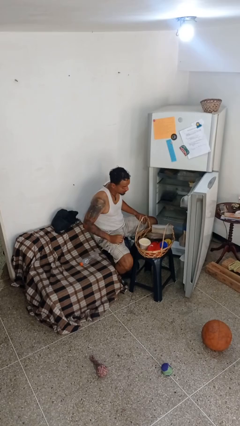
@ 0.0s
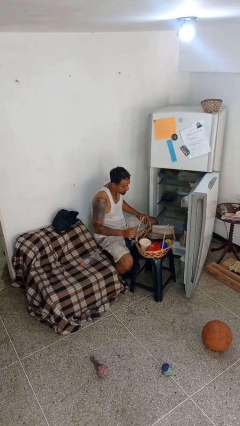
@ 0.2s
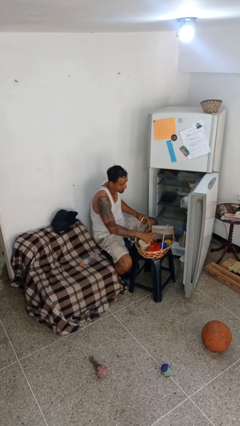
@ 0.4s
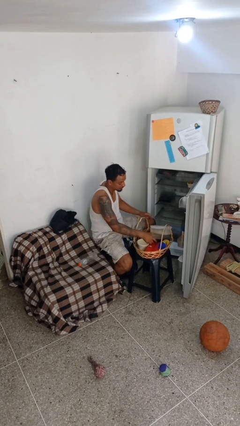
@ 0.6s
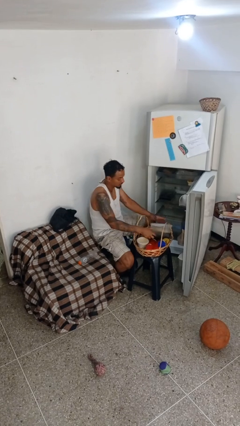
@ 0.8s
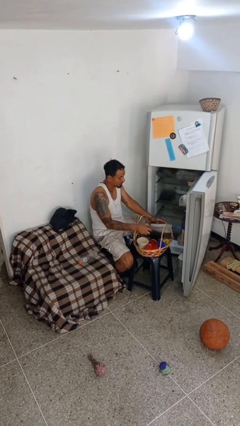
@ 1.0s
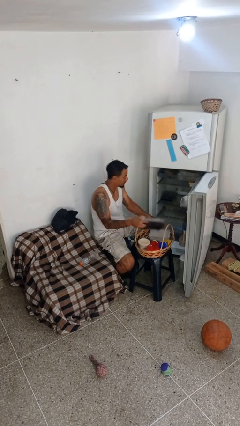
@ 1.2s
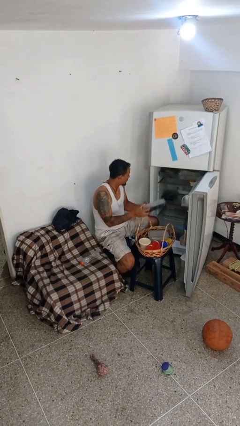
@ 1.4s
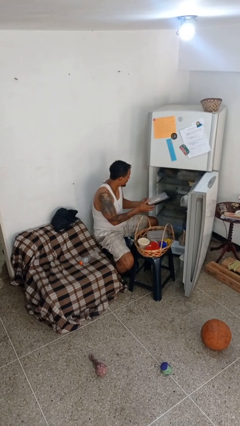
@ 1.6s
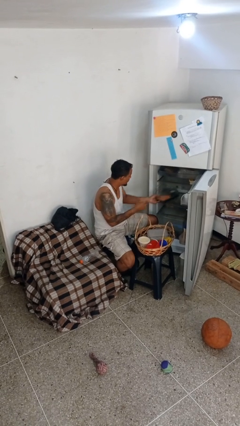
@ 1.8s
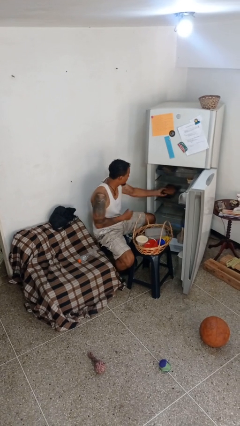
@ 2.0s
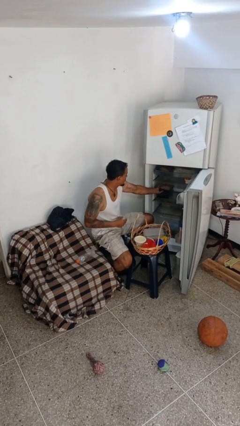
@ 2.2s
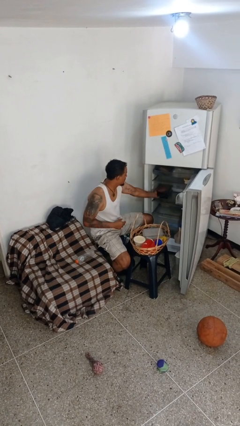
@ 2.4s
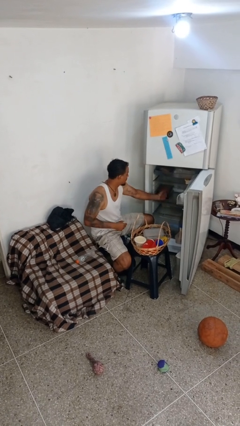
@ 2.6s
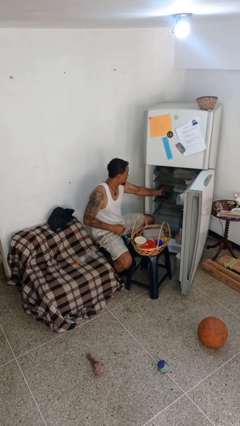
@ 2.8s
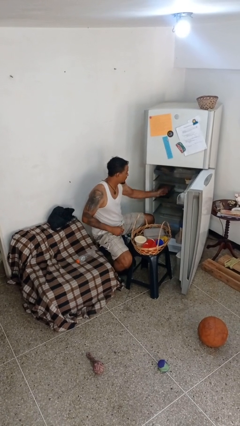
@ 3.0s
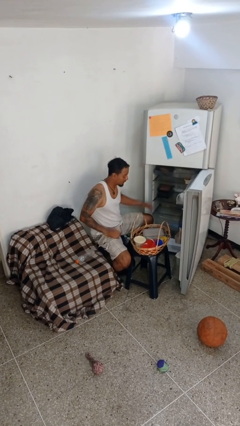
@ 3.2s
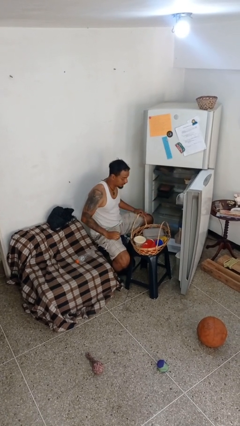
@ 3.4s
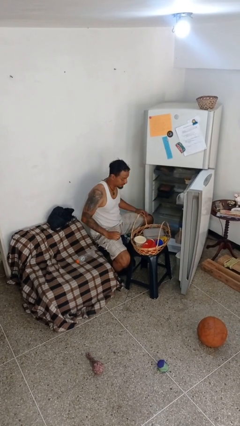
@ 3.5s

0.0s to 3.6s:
person loads groceries into refrigerator

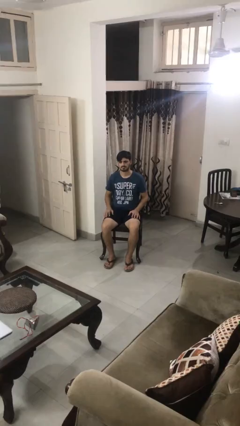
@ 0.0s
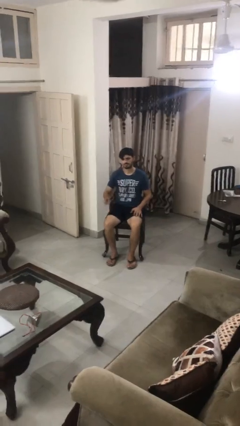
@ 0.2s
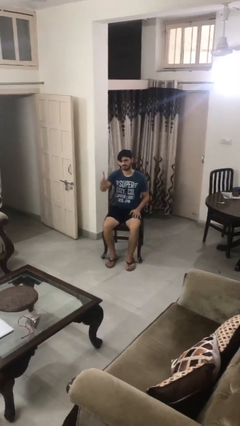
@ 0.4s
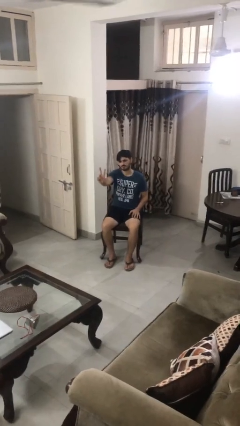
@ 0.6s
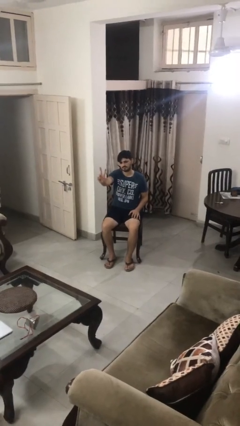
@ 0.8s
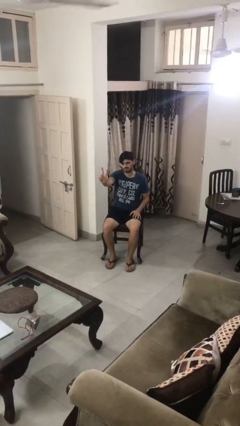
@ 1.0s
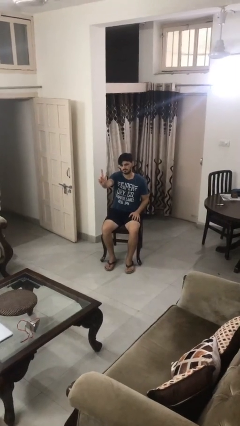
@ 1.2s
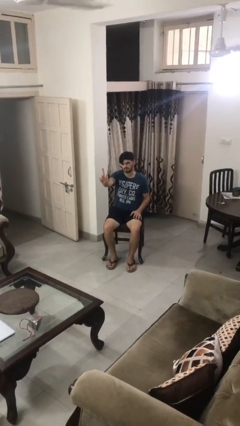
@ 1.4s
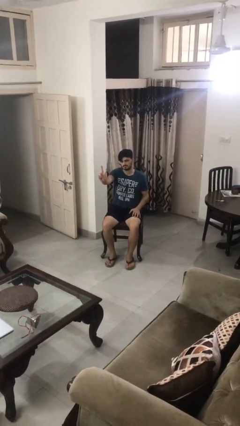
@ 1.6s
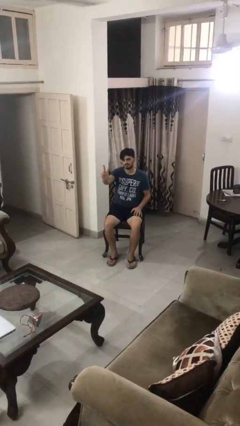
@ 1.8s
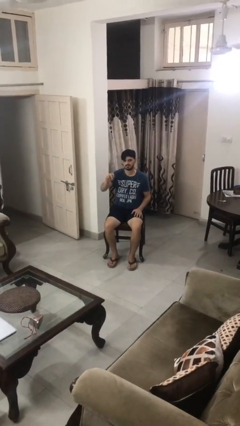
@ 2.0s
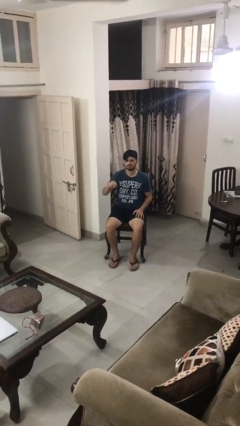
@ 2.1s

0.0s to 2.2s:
person gestures peace

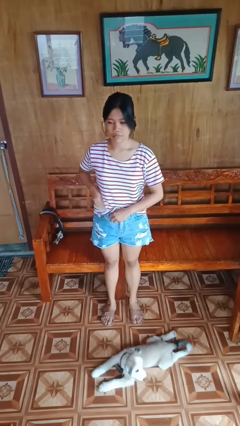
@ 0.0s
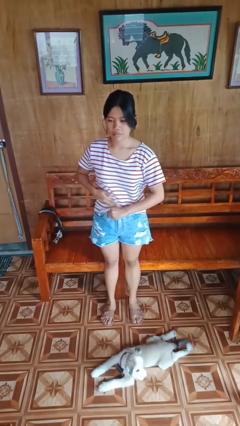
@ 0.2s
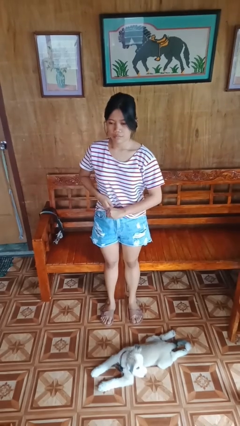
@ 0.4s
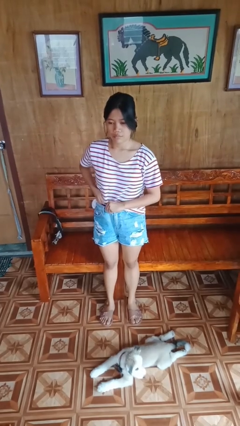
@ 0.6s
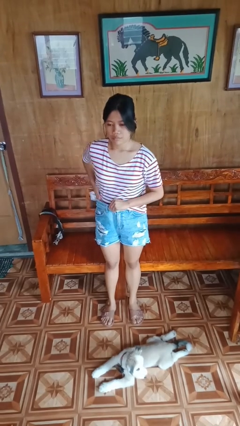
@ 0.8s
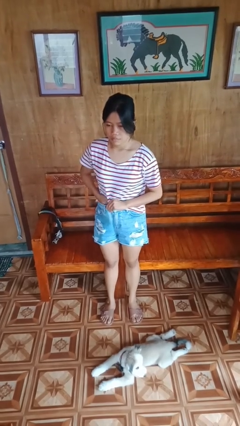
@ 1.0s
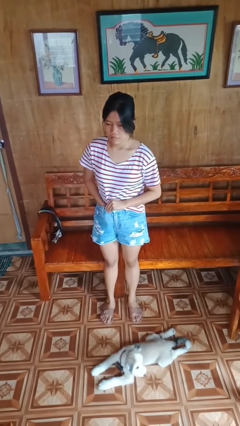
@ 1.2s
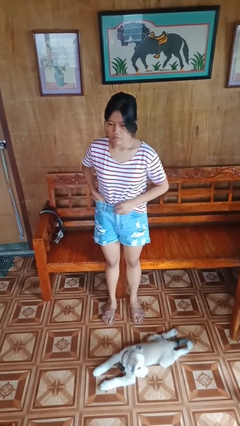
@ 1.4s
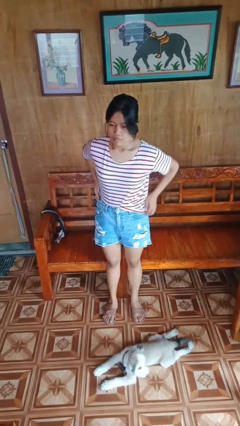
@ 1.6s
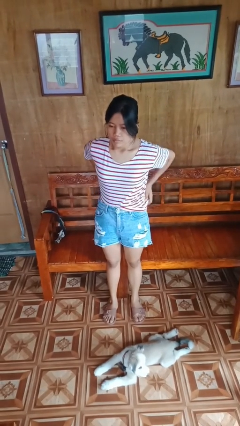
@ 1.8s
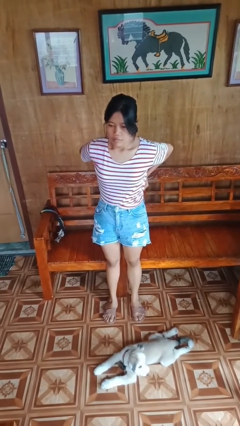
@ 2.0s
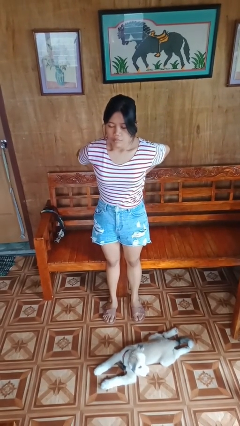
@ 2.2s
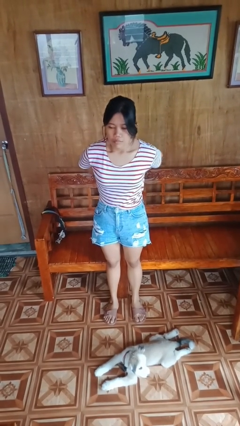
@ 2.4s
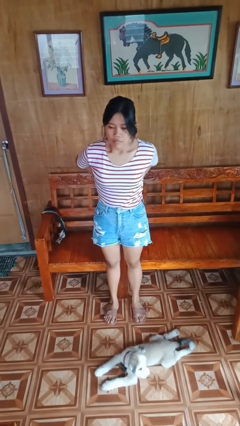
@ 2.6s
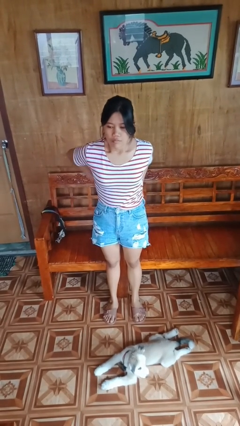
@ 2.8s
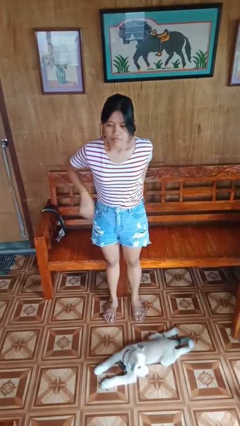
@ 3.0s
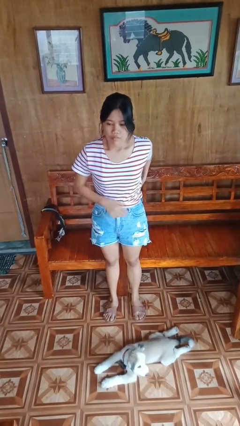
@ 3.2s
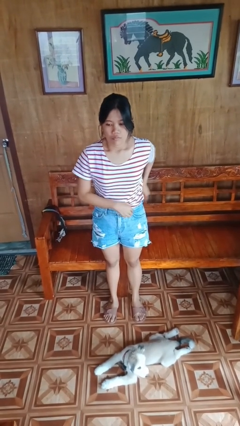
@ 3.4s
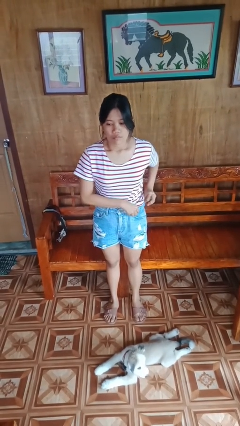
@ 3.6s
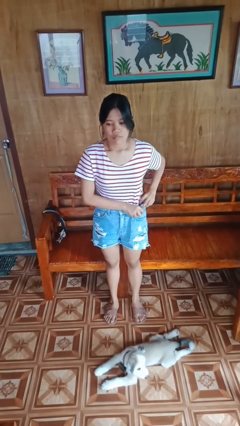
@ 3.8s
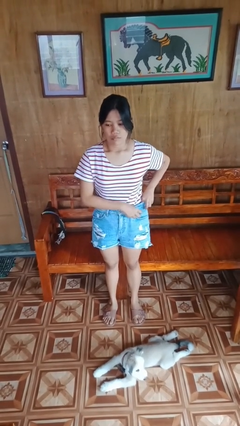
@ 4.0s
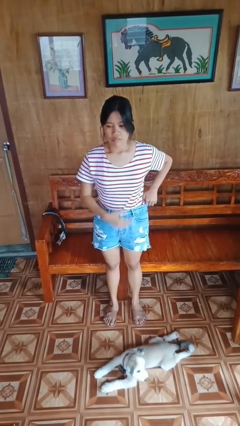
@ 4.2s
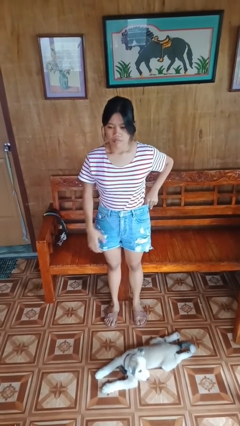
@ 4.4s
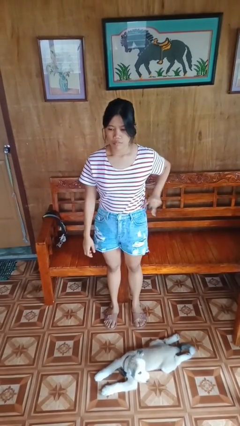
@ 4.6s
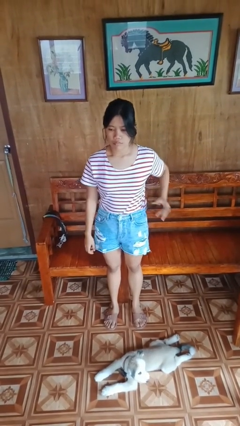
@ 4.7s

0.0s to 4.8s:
person tucks in shirt

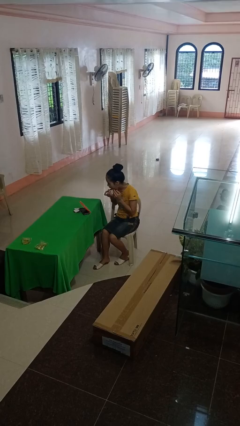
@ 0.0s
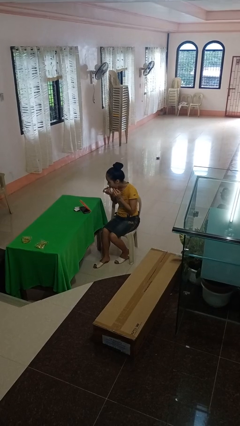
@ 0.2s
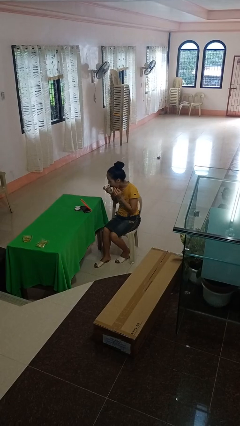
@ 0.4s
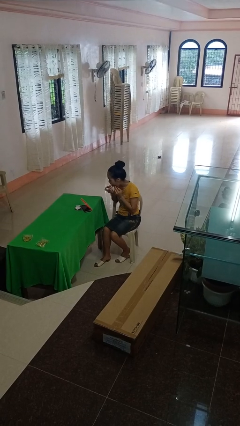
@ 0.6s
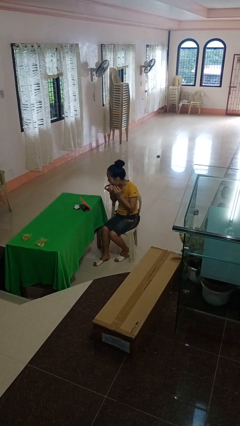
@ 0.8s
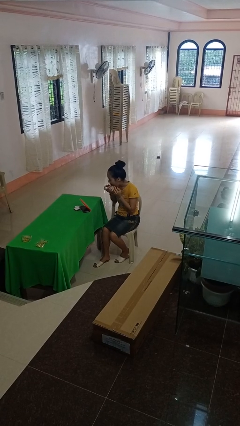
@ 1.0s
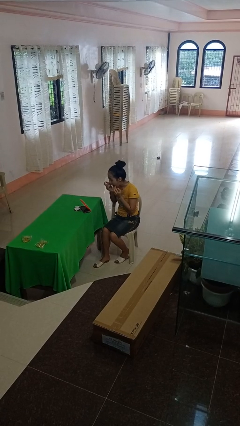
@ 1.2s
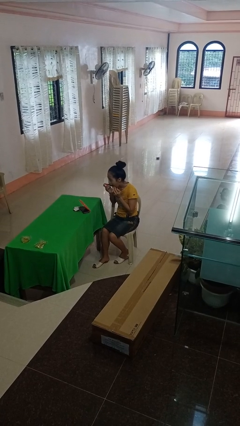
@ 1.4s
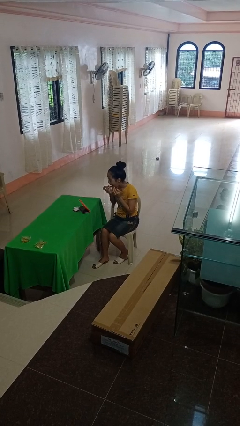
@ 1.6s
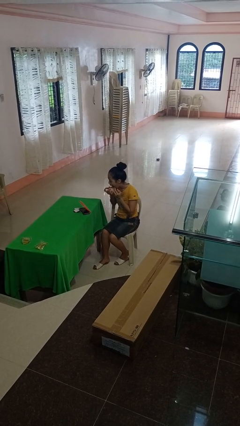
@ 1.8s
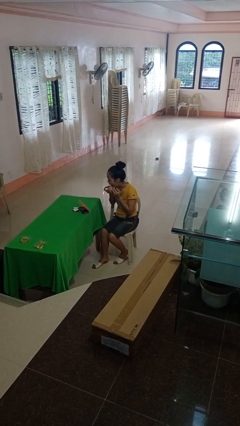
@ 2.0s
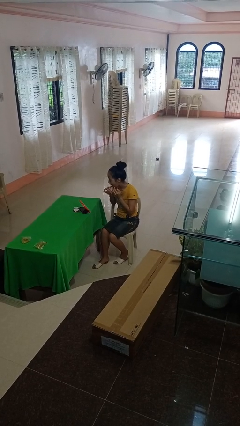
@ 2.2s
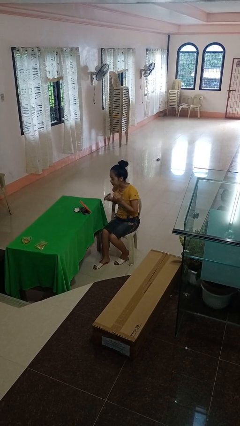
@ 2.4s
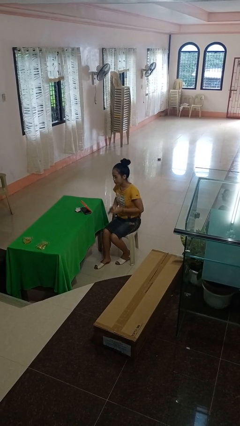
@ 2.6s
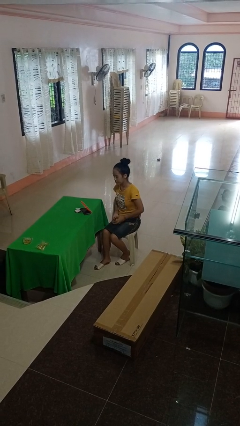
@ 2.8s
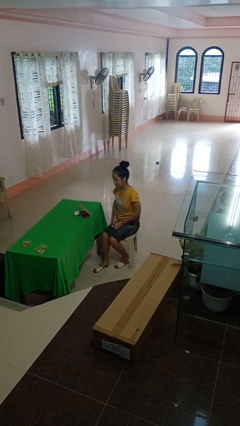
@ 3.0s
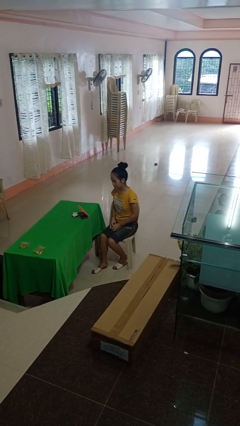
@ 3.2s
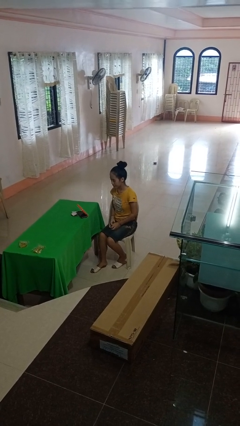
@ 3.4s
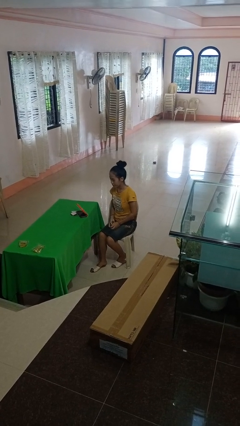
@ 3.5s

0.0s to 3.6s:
person applies lip makeup

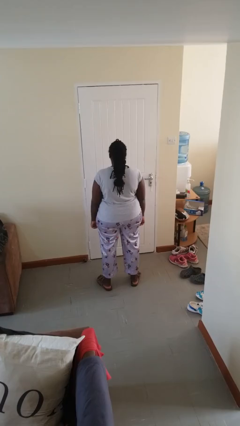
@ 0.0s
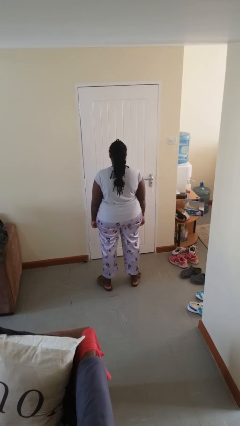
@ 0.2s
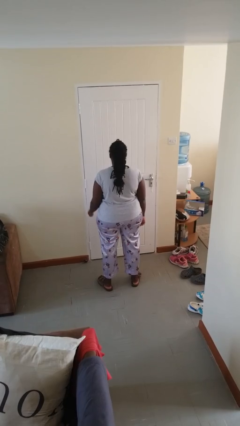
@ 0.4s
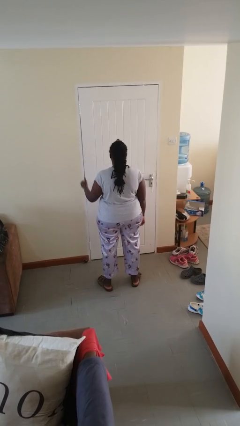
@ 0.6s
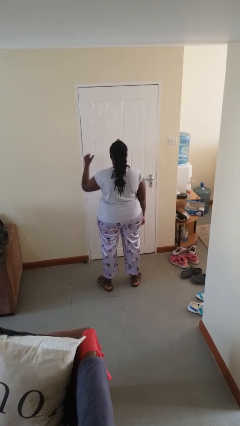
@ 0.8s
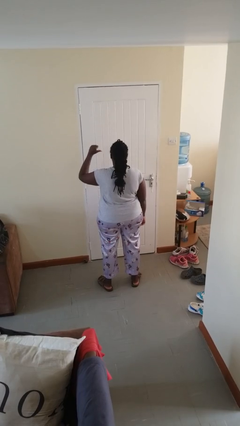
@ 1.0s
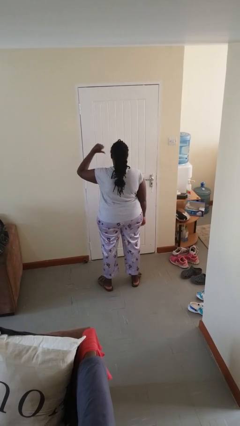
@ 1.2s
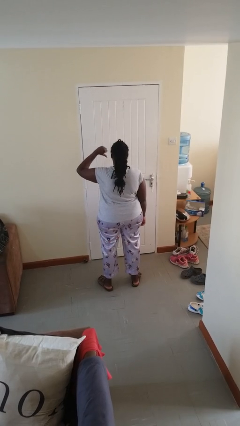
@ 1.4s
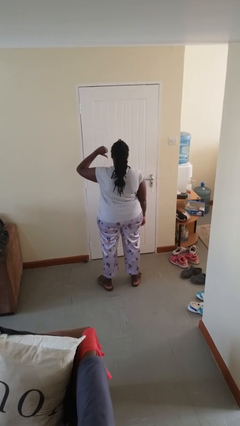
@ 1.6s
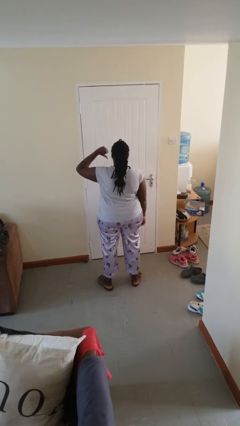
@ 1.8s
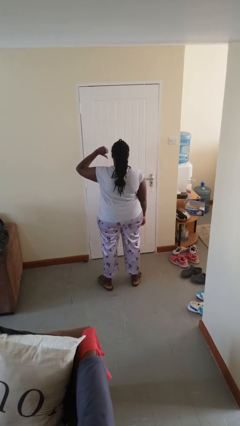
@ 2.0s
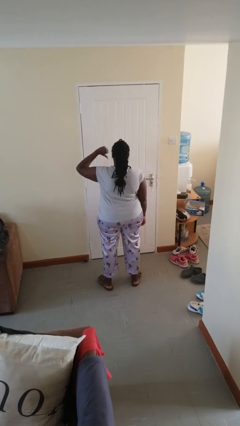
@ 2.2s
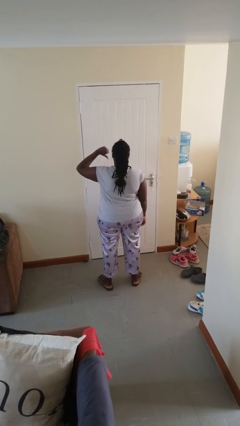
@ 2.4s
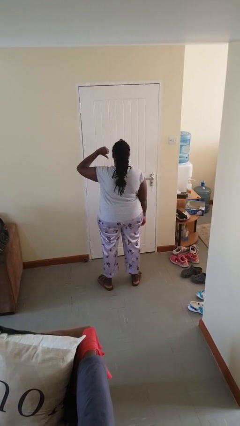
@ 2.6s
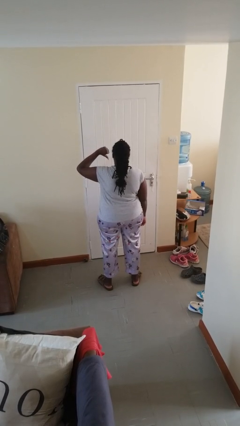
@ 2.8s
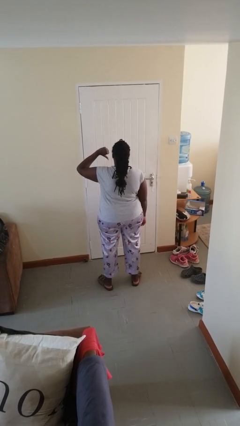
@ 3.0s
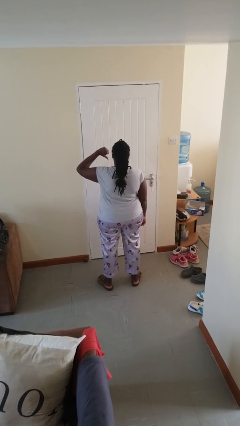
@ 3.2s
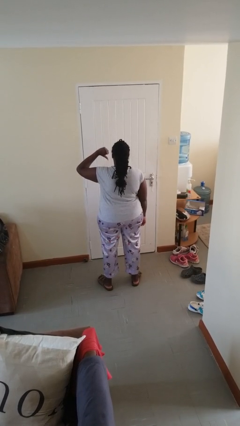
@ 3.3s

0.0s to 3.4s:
person gestures thumbs down
